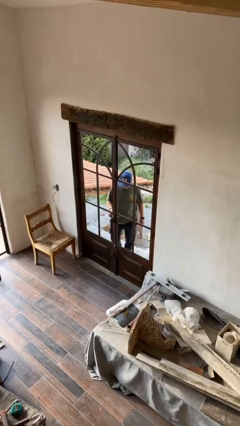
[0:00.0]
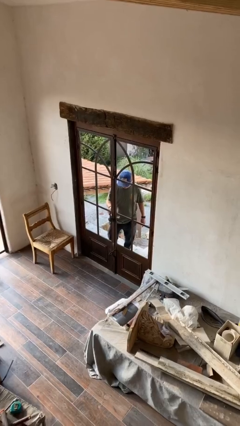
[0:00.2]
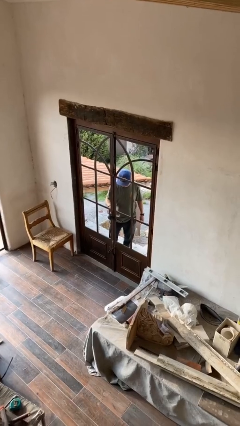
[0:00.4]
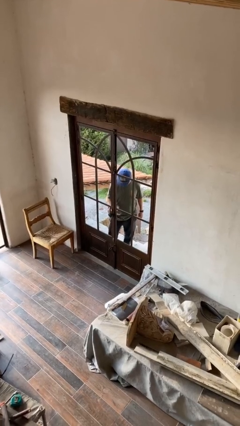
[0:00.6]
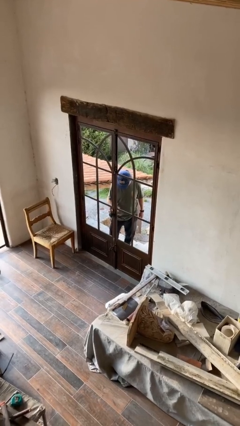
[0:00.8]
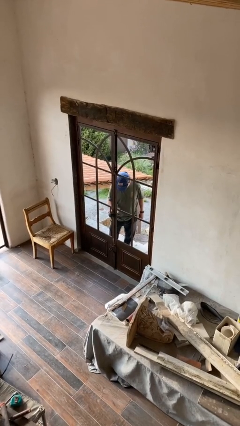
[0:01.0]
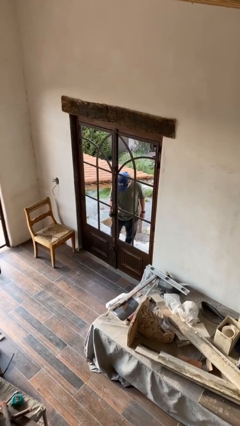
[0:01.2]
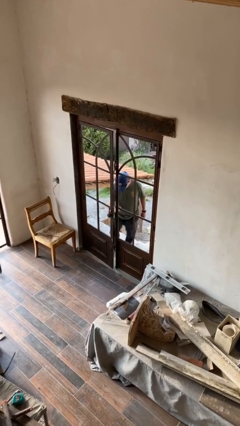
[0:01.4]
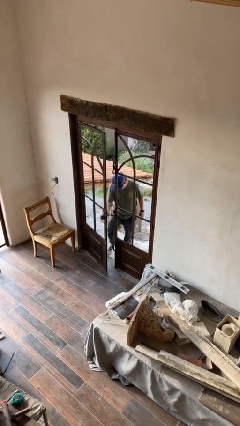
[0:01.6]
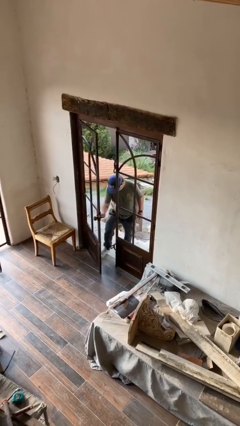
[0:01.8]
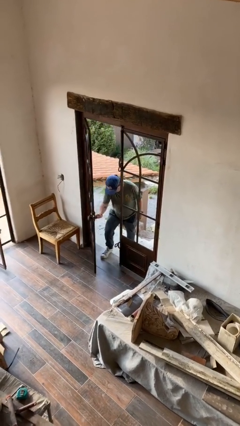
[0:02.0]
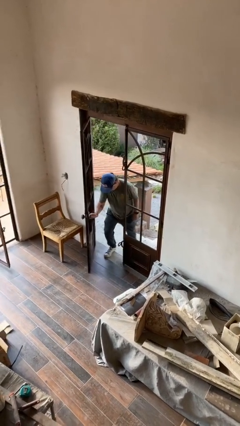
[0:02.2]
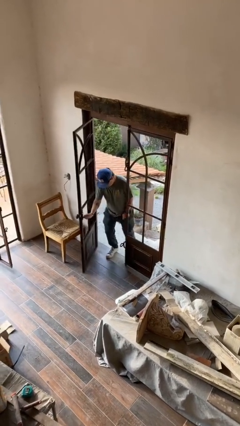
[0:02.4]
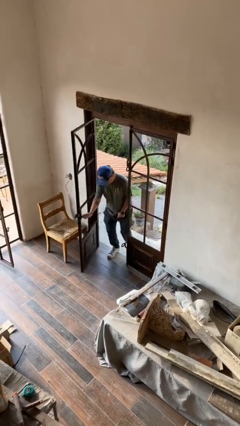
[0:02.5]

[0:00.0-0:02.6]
person opens facility door

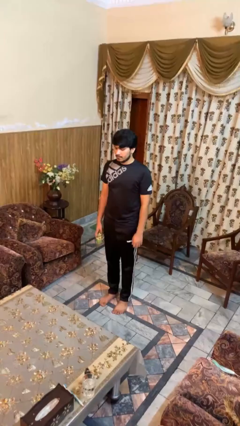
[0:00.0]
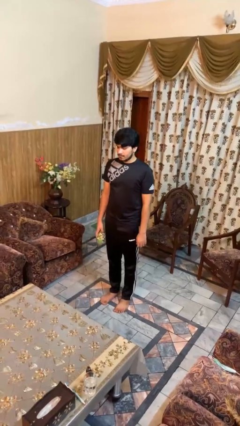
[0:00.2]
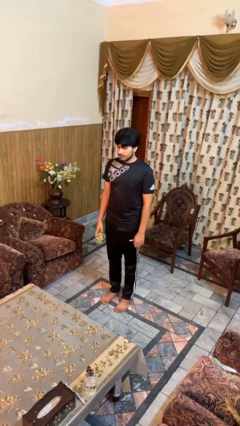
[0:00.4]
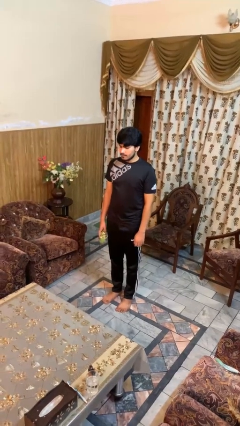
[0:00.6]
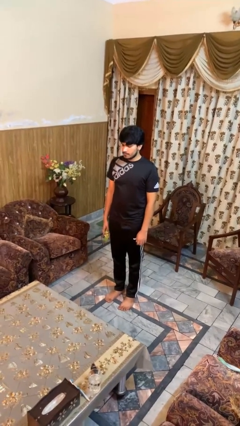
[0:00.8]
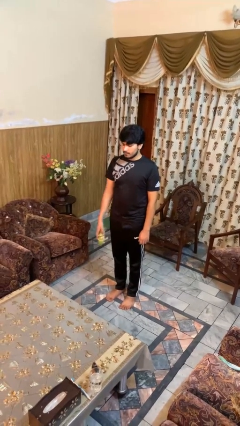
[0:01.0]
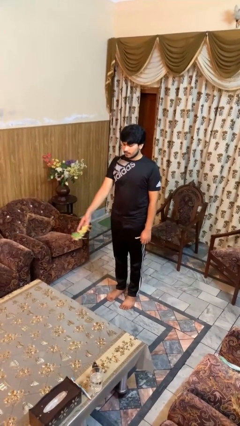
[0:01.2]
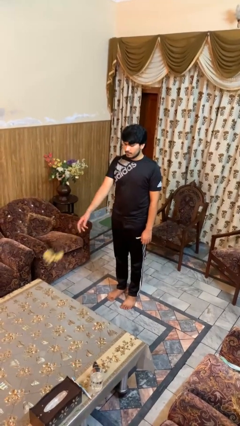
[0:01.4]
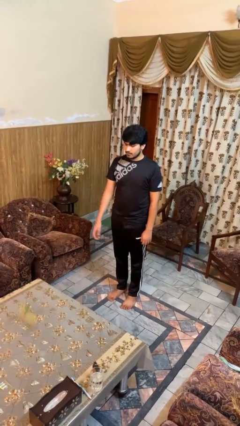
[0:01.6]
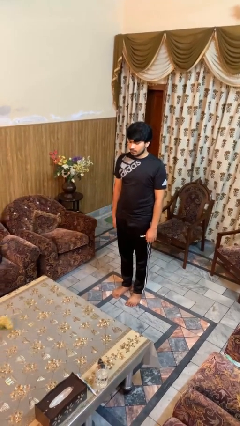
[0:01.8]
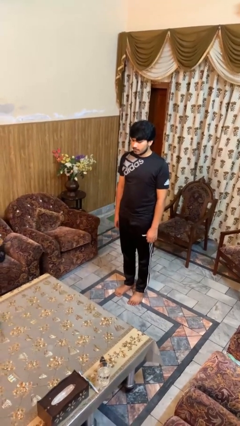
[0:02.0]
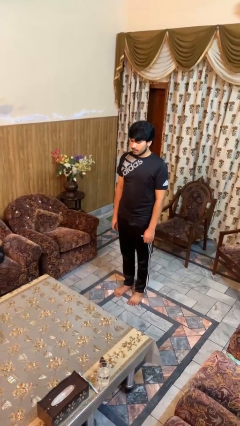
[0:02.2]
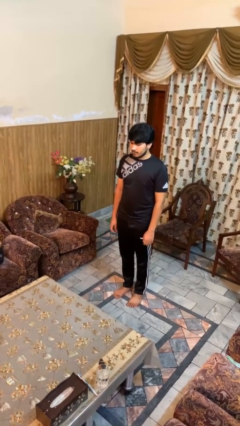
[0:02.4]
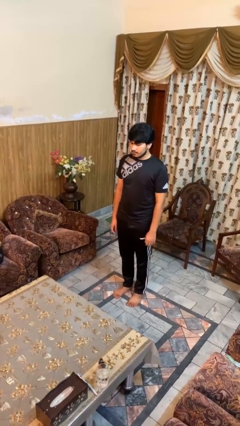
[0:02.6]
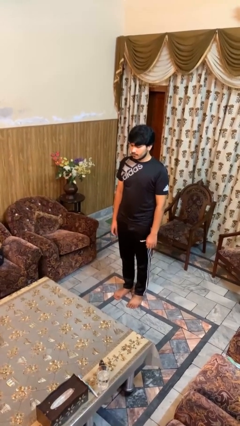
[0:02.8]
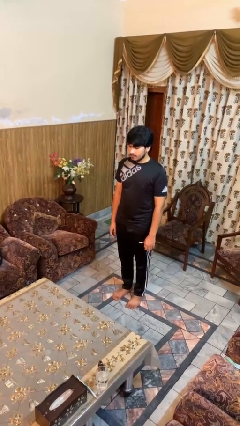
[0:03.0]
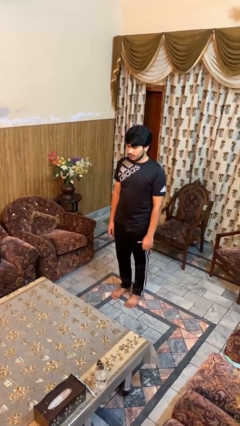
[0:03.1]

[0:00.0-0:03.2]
person throws object on table

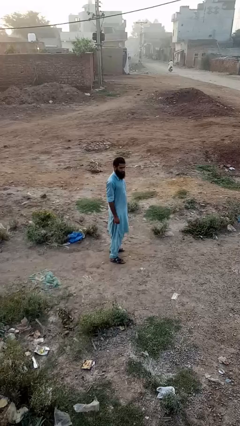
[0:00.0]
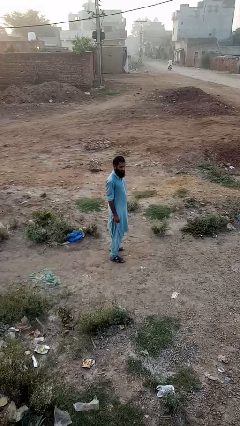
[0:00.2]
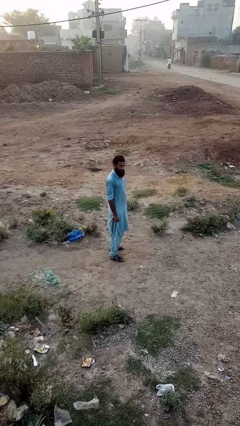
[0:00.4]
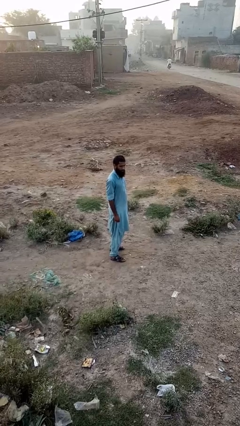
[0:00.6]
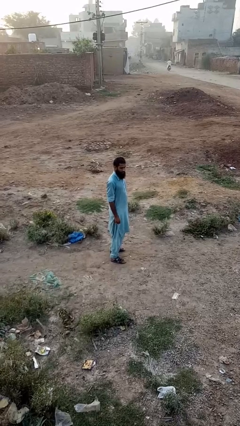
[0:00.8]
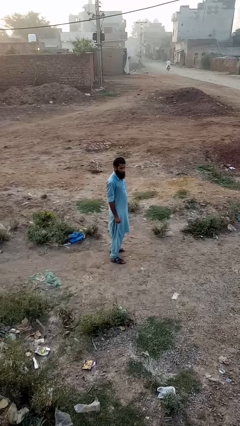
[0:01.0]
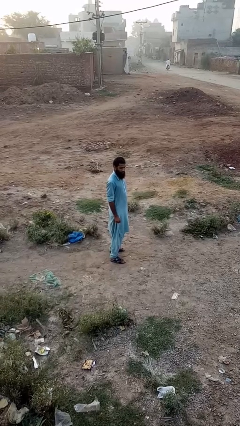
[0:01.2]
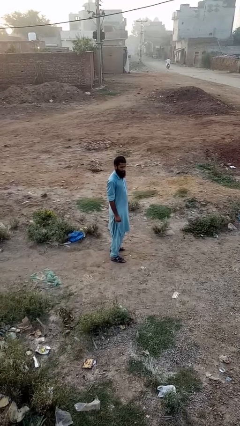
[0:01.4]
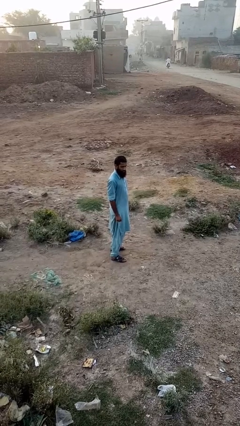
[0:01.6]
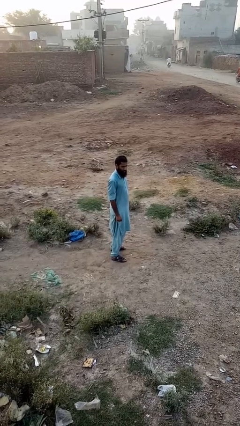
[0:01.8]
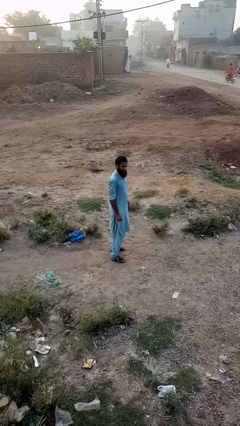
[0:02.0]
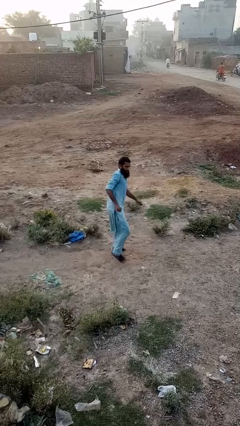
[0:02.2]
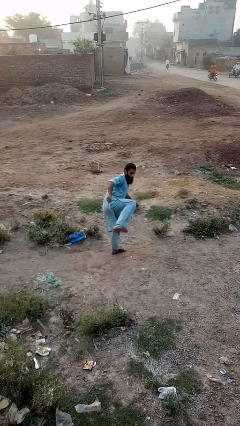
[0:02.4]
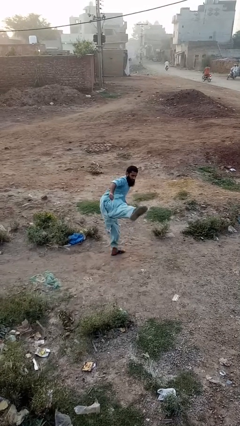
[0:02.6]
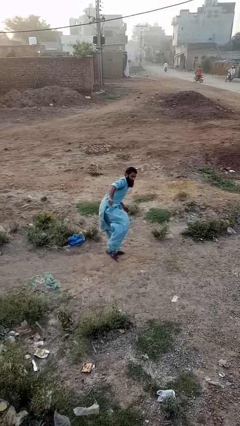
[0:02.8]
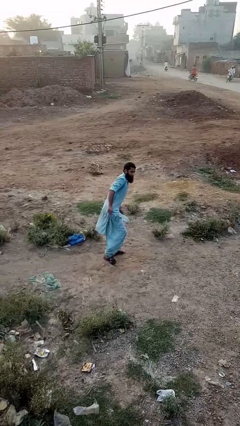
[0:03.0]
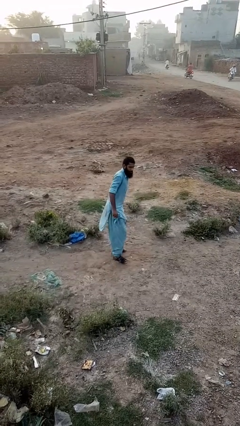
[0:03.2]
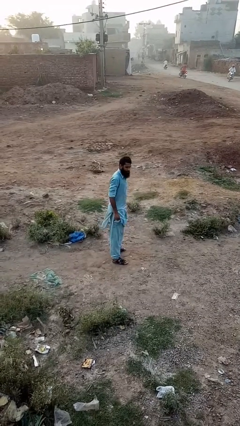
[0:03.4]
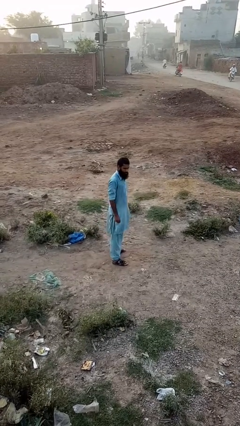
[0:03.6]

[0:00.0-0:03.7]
person karate kicks

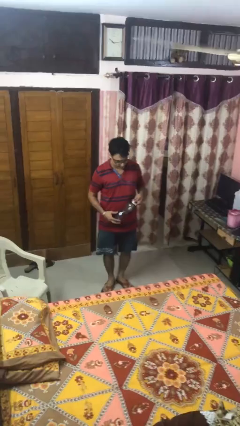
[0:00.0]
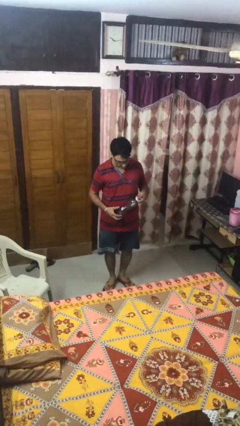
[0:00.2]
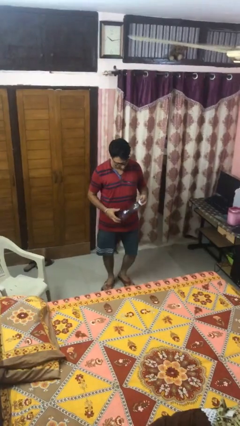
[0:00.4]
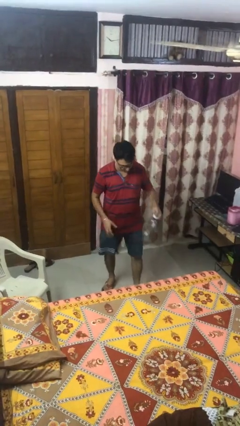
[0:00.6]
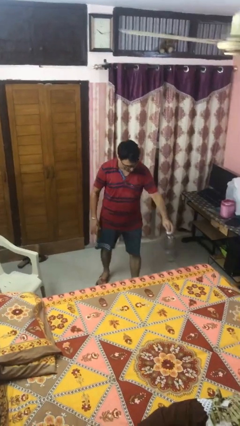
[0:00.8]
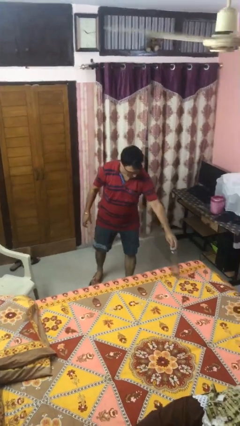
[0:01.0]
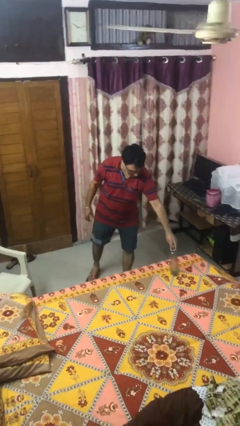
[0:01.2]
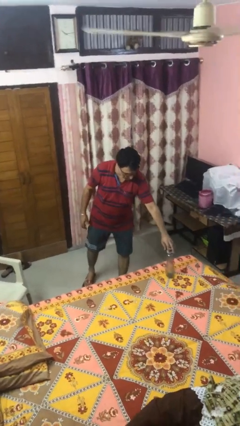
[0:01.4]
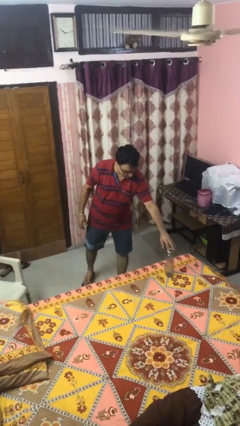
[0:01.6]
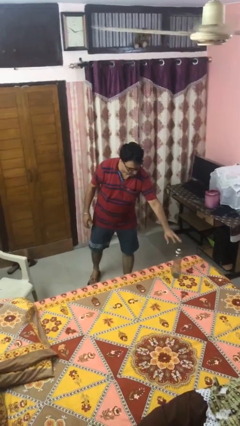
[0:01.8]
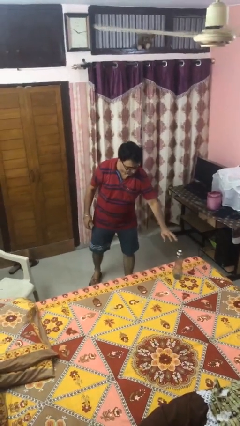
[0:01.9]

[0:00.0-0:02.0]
person puts down object on bed

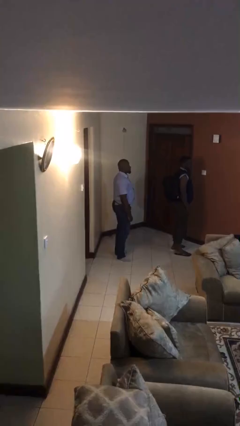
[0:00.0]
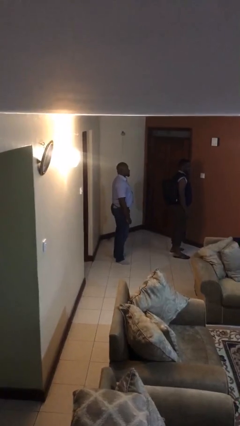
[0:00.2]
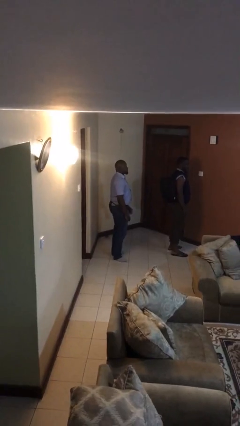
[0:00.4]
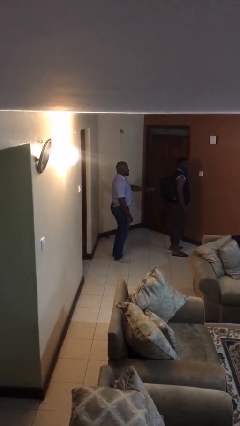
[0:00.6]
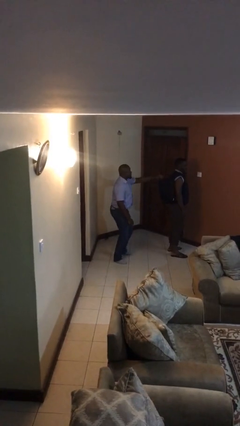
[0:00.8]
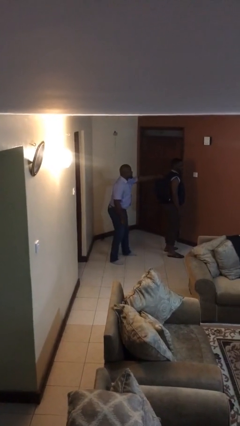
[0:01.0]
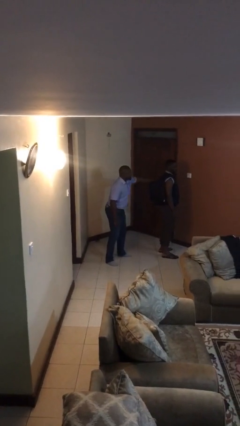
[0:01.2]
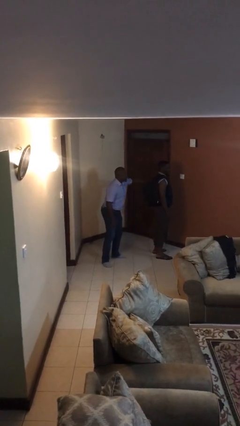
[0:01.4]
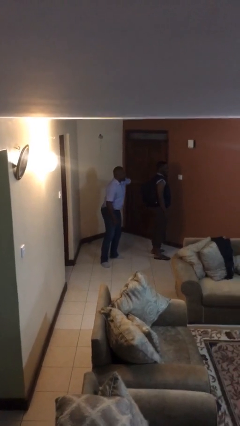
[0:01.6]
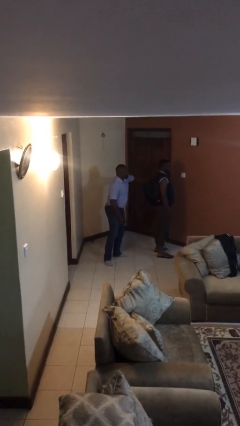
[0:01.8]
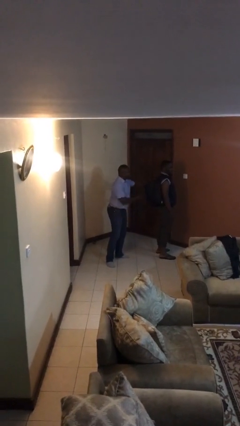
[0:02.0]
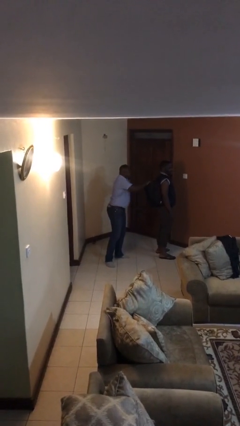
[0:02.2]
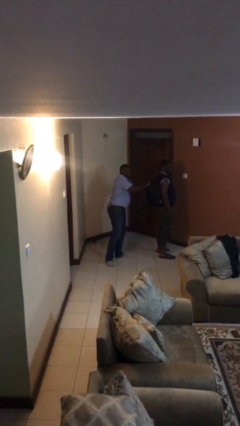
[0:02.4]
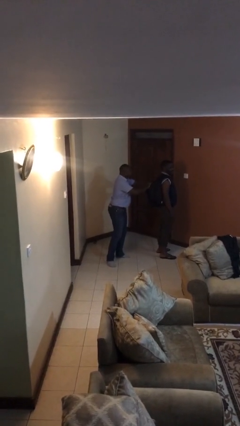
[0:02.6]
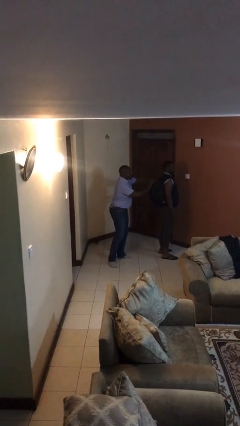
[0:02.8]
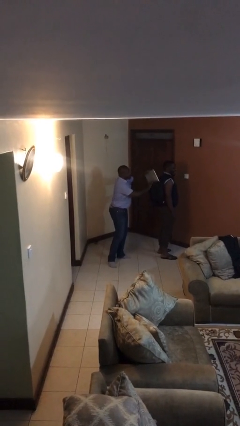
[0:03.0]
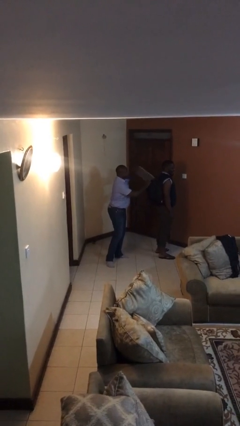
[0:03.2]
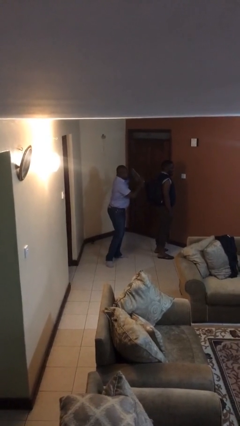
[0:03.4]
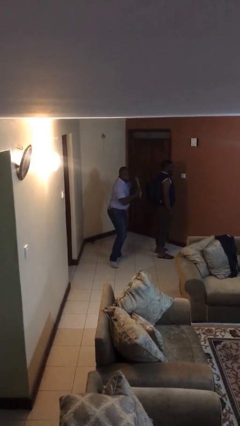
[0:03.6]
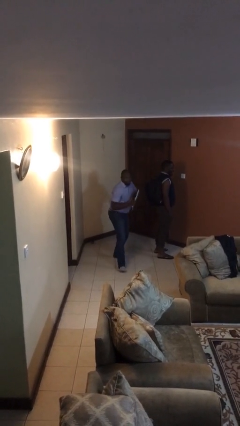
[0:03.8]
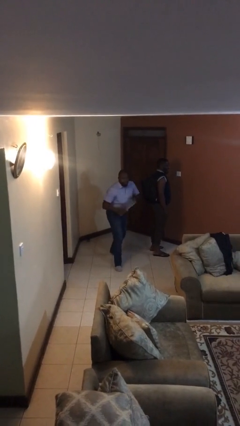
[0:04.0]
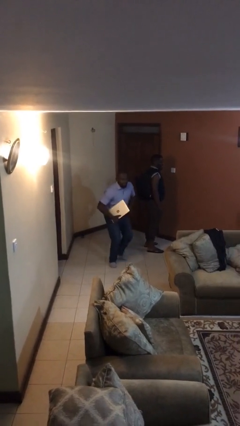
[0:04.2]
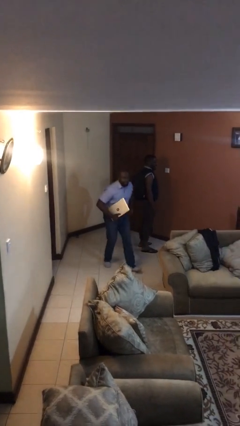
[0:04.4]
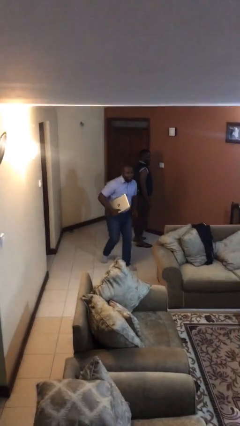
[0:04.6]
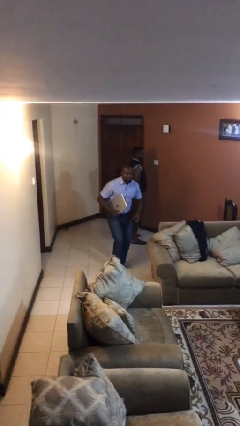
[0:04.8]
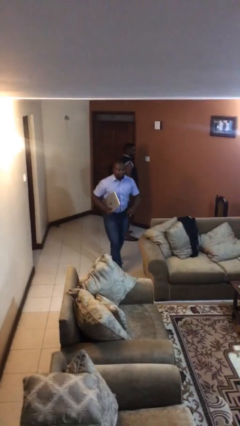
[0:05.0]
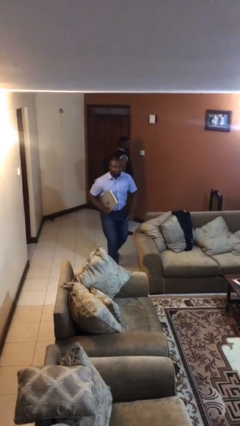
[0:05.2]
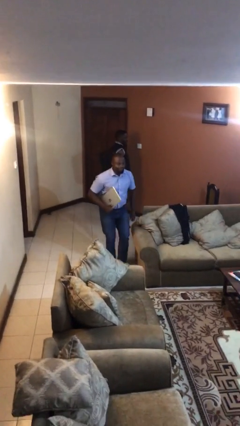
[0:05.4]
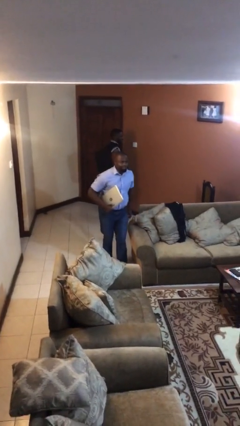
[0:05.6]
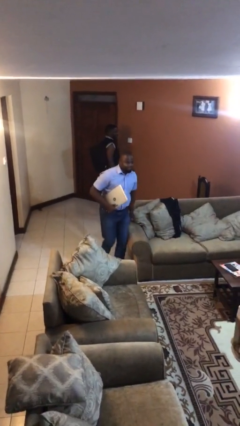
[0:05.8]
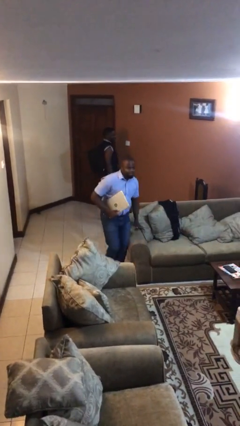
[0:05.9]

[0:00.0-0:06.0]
person steals object from person

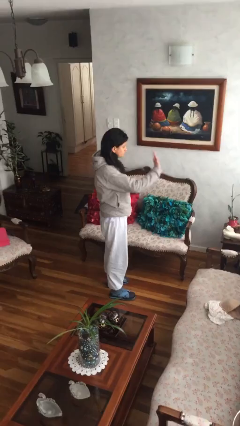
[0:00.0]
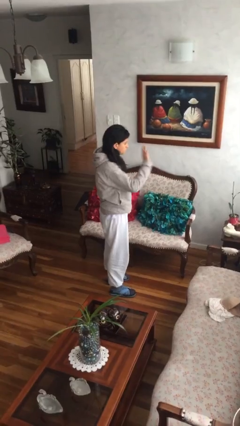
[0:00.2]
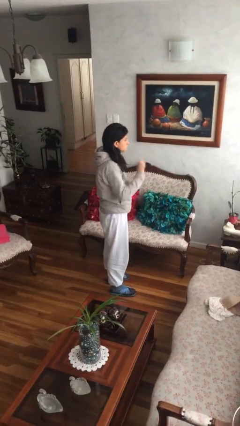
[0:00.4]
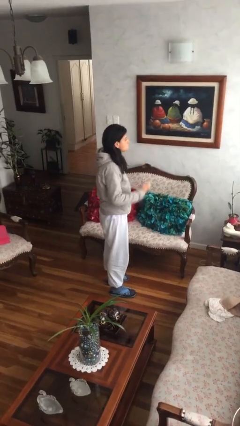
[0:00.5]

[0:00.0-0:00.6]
person gestures stop
